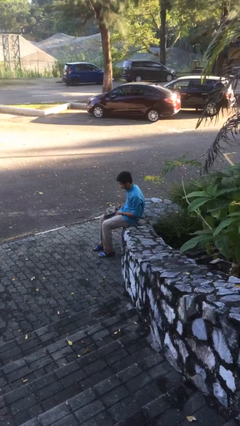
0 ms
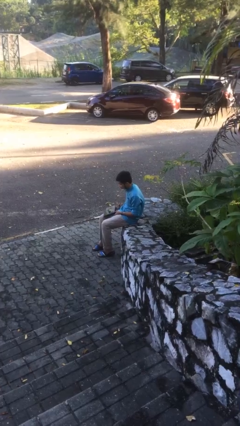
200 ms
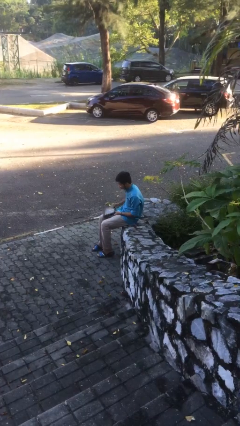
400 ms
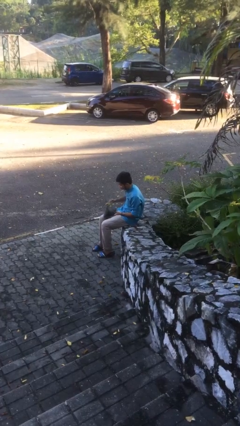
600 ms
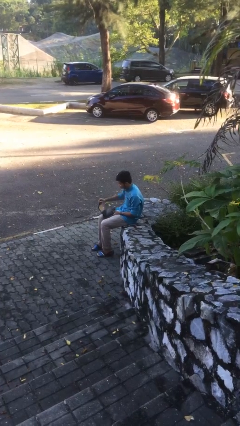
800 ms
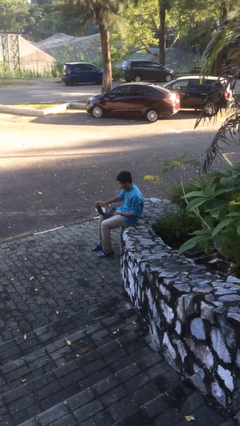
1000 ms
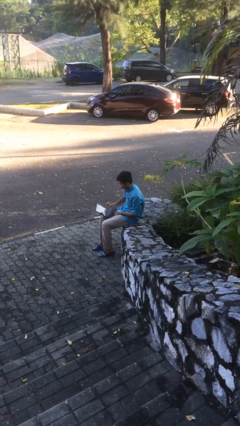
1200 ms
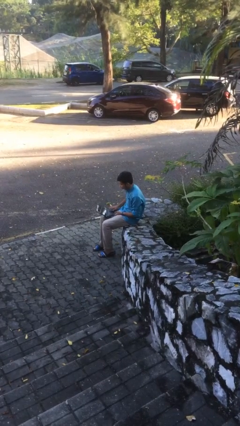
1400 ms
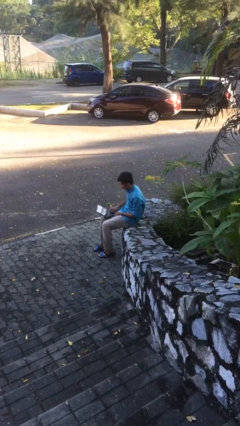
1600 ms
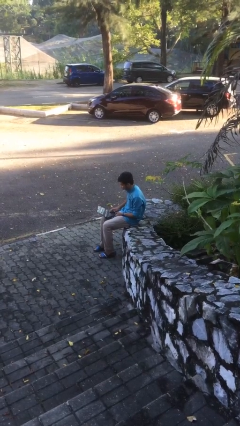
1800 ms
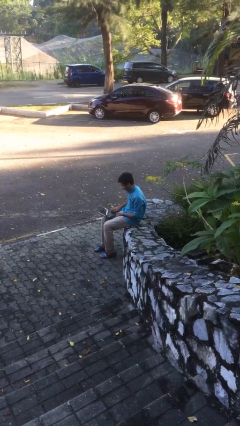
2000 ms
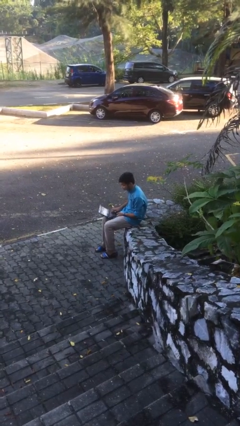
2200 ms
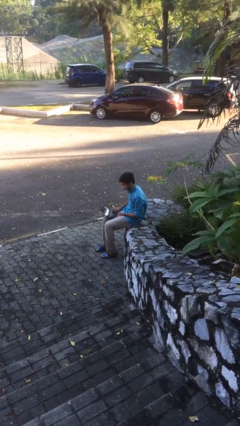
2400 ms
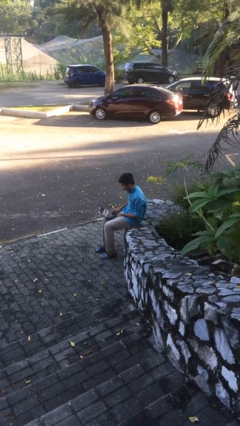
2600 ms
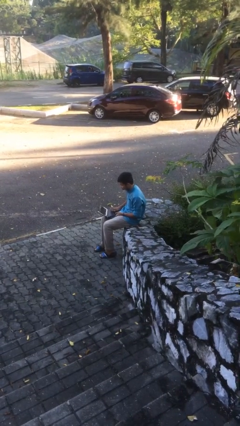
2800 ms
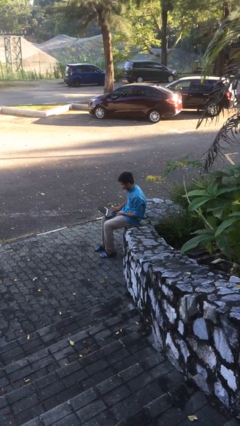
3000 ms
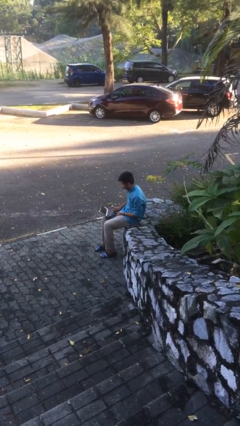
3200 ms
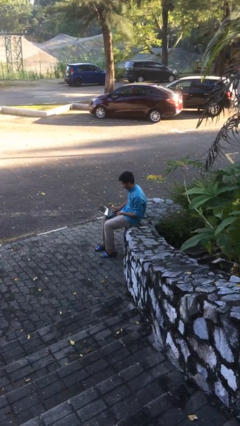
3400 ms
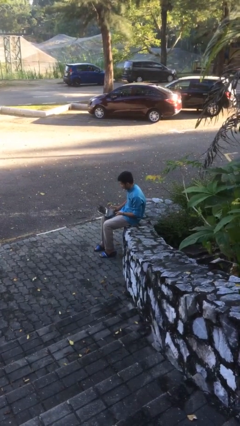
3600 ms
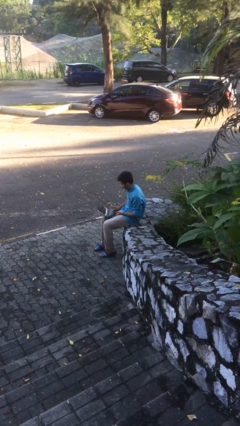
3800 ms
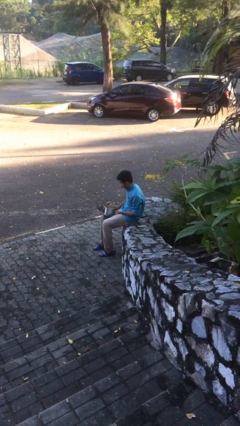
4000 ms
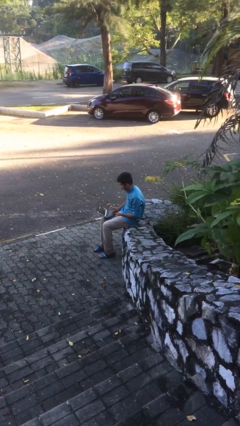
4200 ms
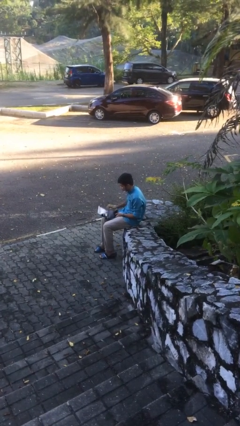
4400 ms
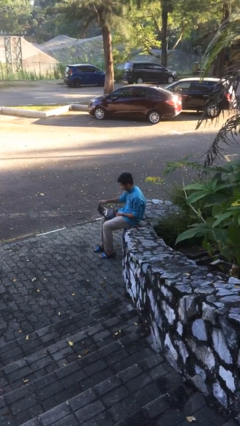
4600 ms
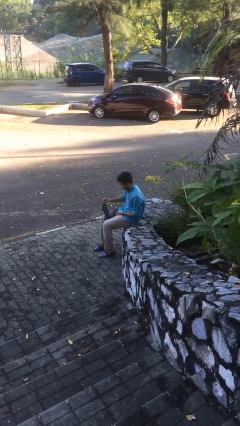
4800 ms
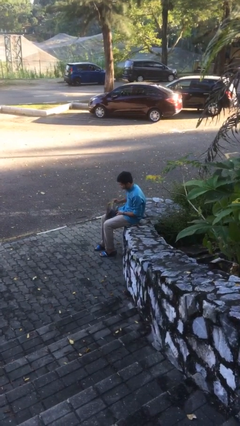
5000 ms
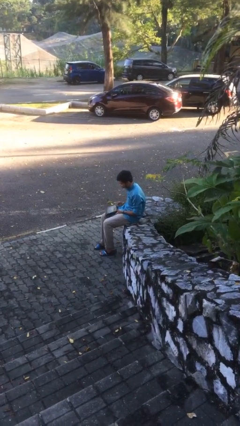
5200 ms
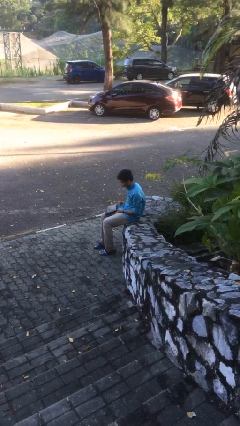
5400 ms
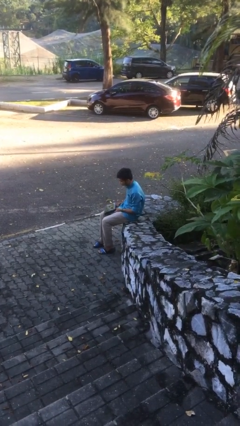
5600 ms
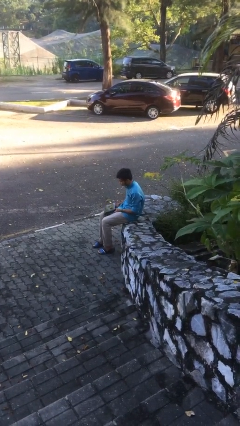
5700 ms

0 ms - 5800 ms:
person interacts with laptop

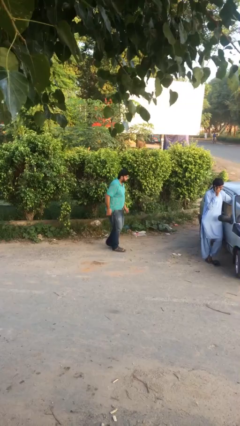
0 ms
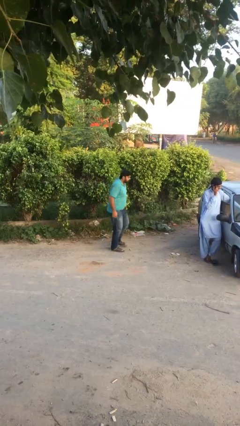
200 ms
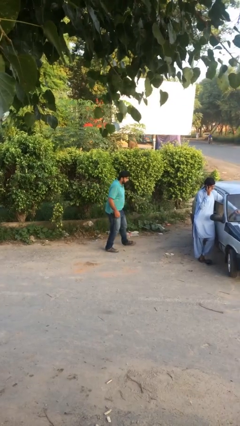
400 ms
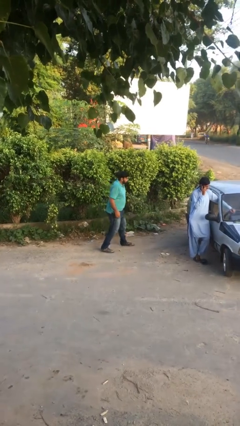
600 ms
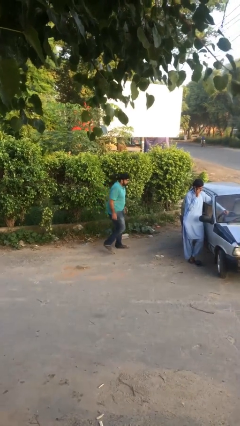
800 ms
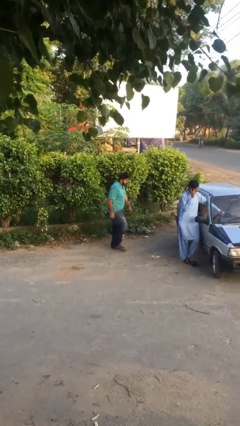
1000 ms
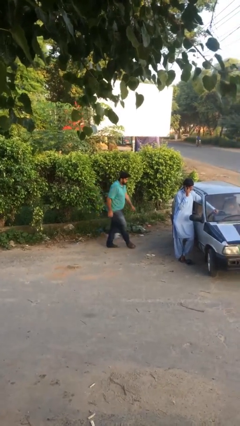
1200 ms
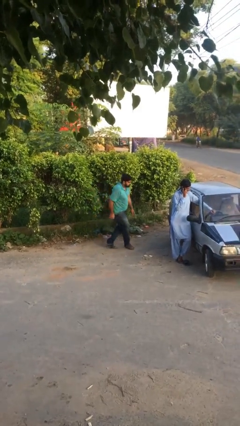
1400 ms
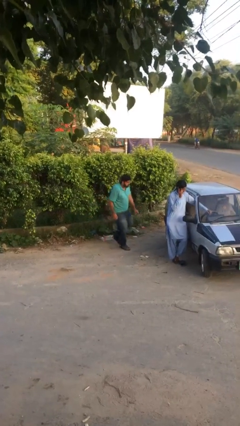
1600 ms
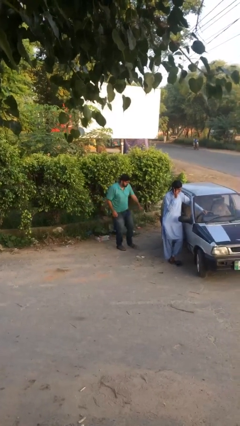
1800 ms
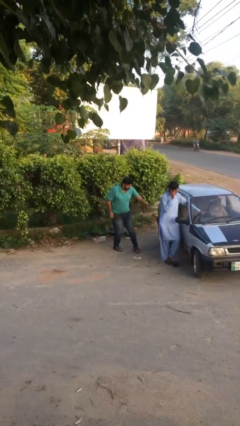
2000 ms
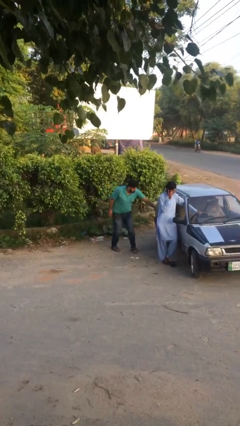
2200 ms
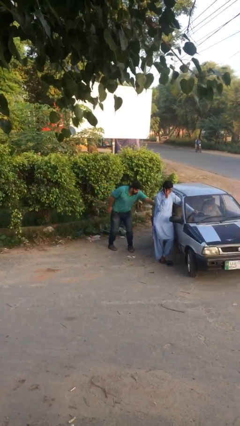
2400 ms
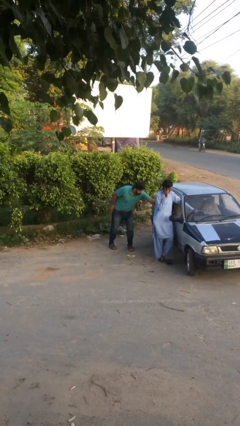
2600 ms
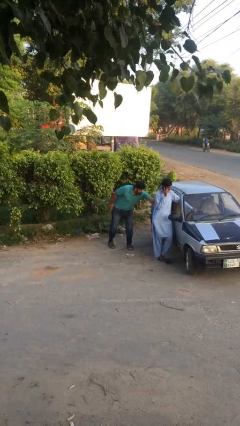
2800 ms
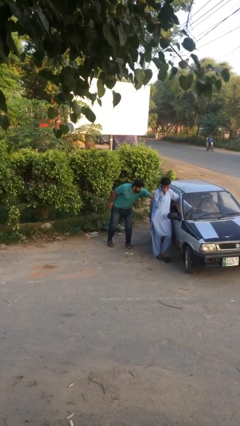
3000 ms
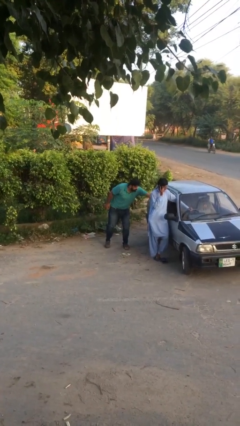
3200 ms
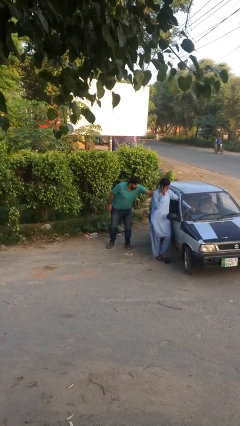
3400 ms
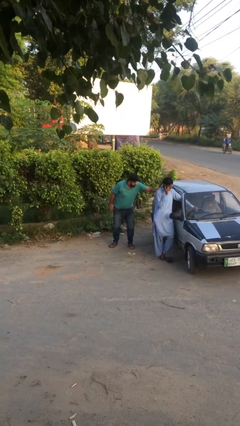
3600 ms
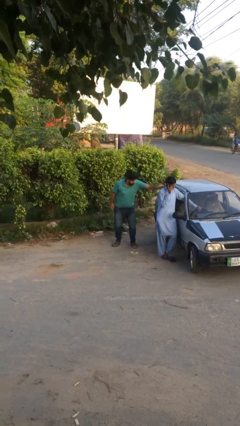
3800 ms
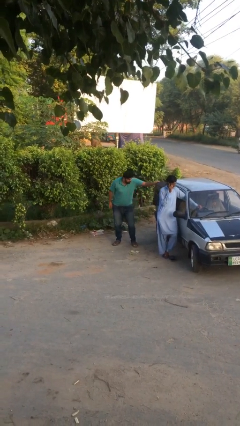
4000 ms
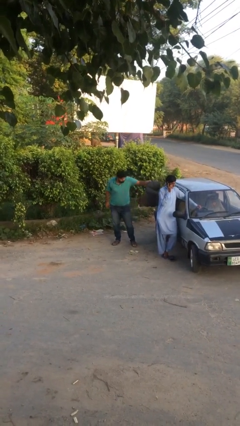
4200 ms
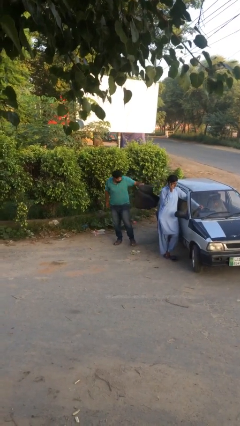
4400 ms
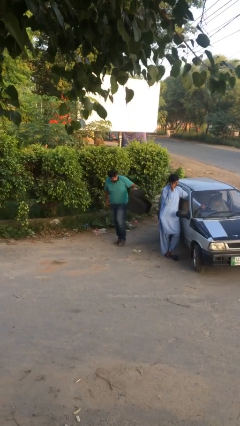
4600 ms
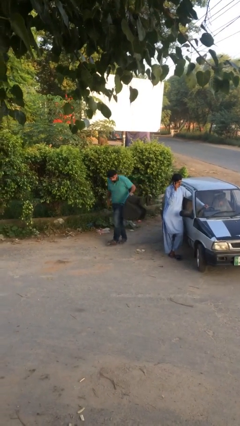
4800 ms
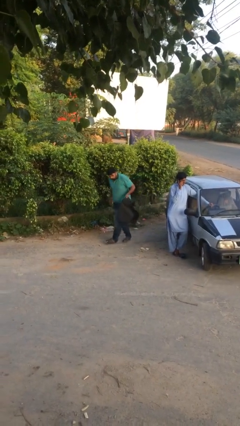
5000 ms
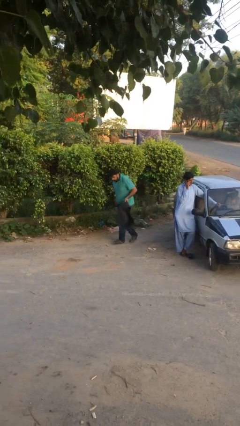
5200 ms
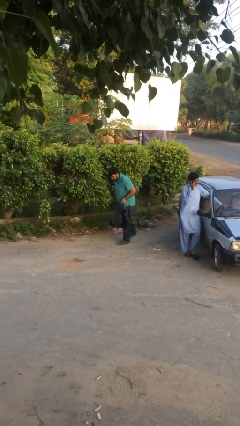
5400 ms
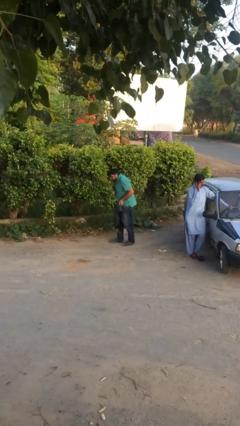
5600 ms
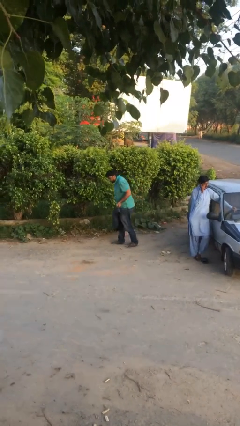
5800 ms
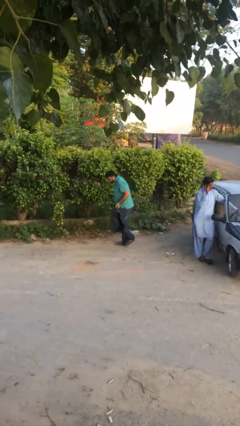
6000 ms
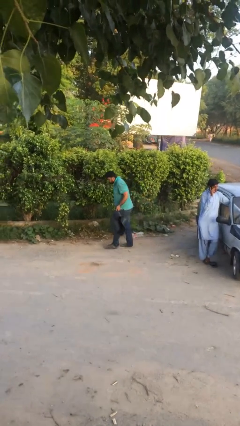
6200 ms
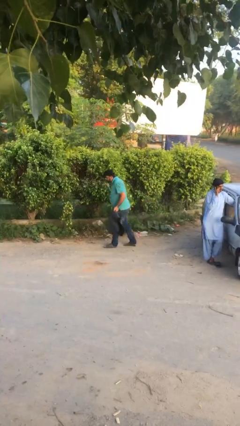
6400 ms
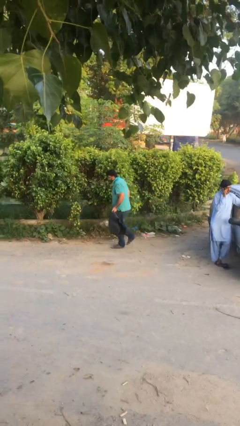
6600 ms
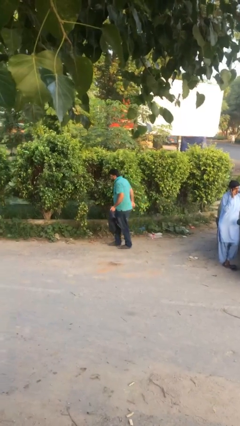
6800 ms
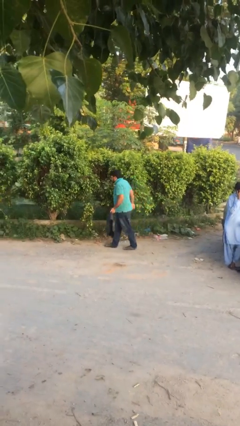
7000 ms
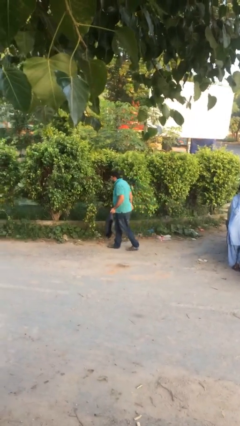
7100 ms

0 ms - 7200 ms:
person steals object from person

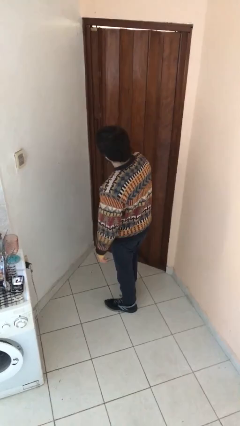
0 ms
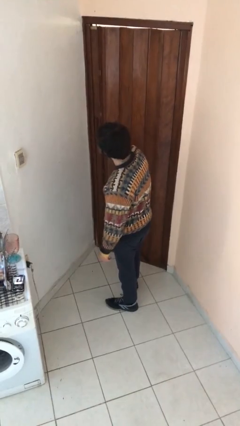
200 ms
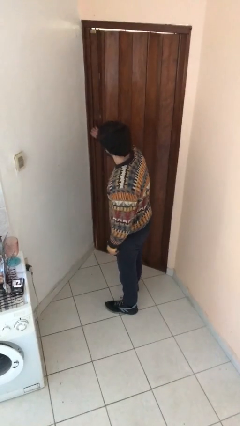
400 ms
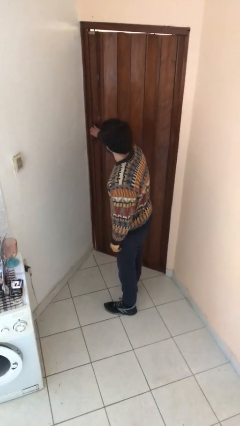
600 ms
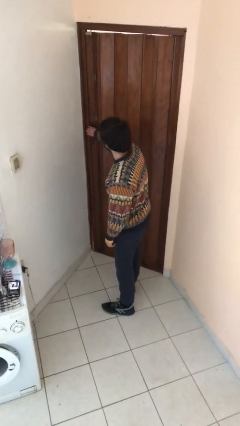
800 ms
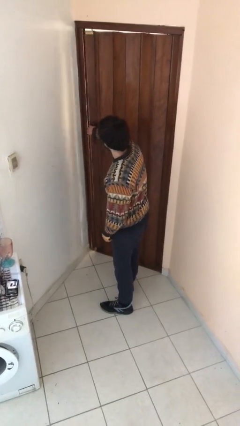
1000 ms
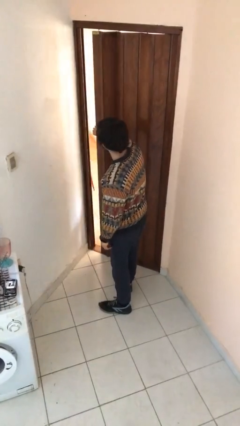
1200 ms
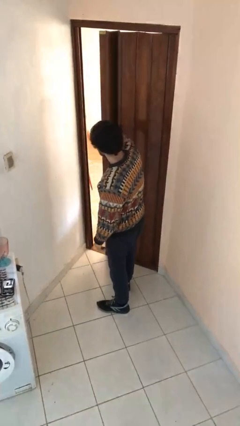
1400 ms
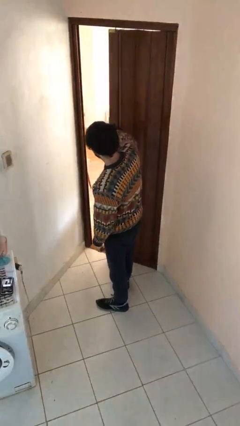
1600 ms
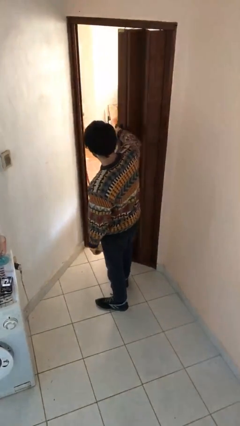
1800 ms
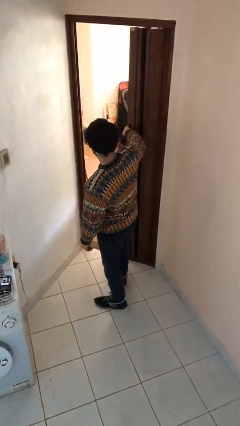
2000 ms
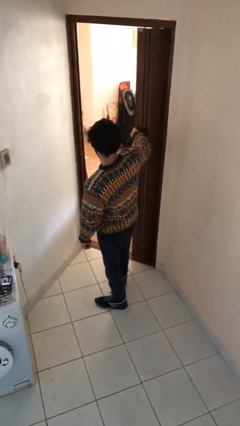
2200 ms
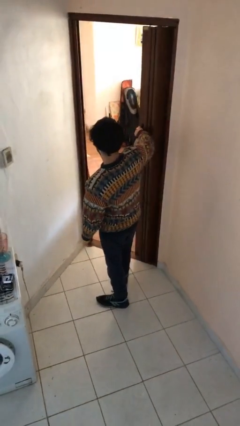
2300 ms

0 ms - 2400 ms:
person opens sliding door

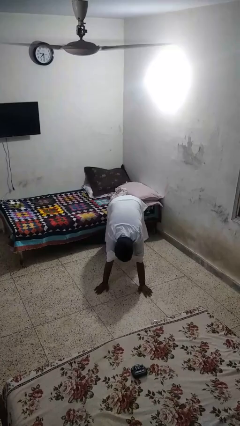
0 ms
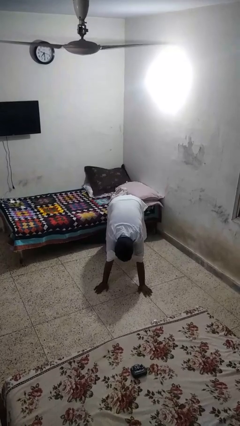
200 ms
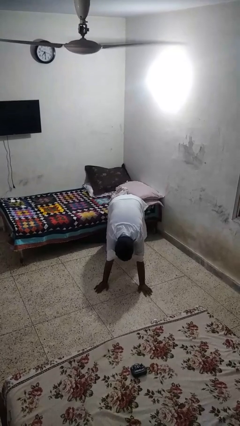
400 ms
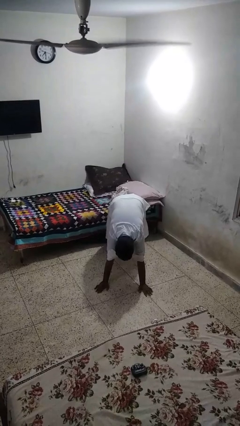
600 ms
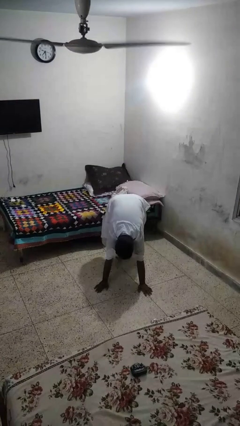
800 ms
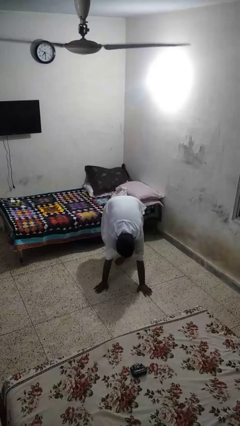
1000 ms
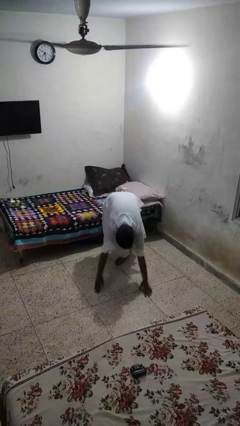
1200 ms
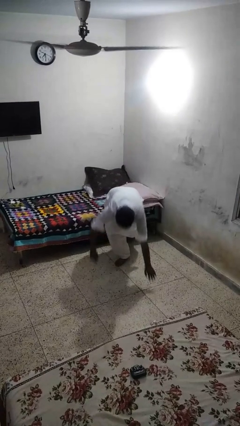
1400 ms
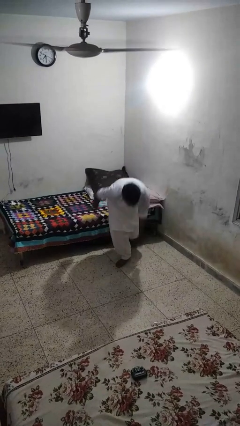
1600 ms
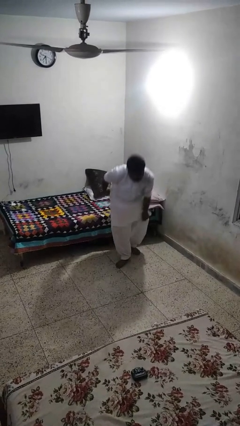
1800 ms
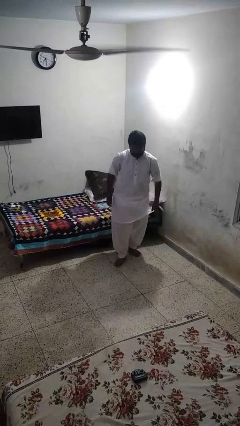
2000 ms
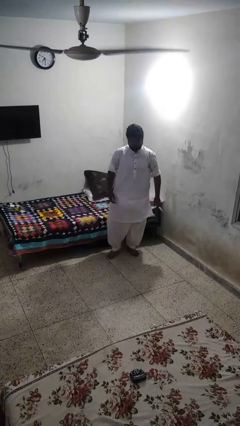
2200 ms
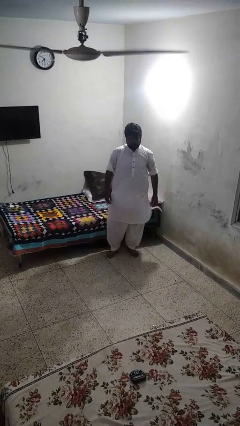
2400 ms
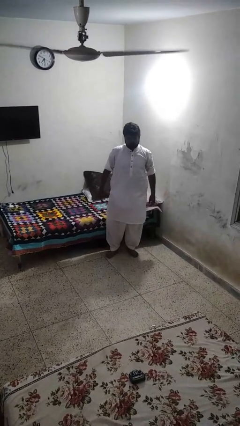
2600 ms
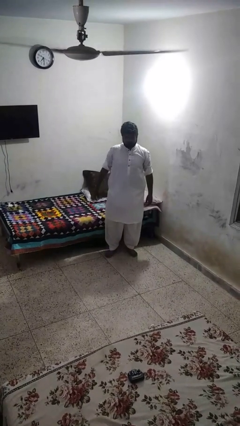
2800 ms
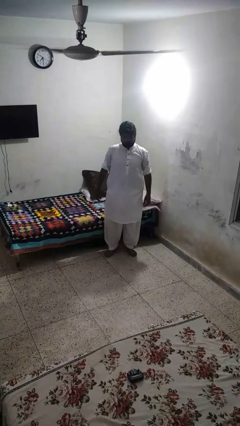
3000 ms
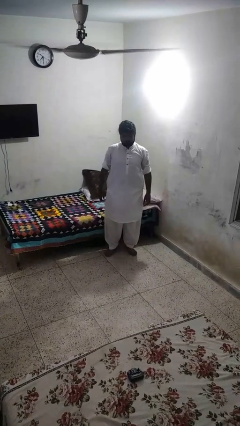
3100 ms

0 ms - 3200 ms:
person stands up from floor
